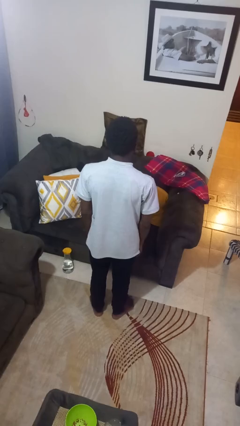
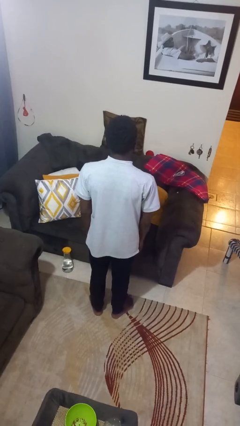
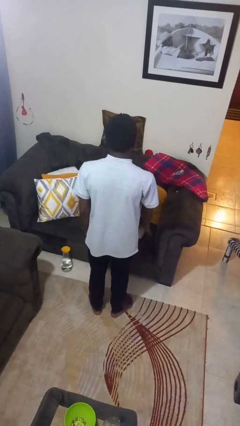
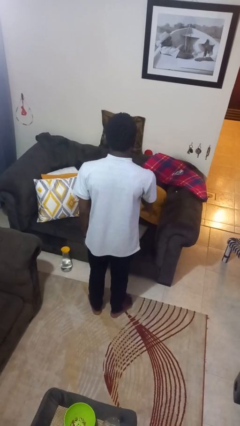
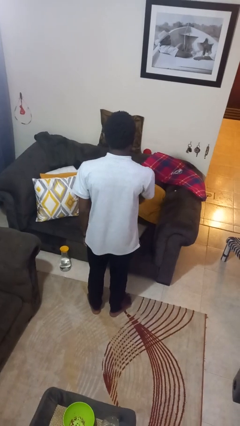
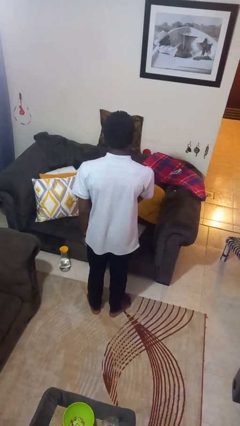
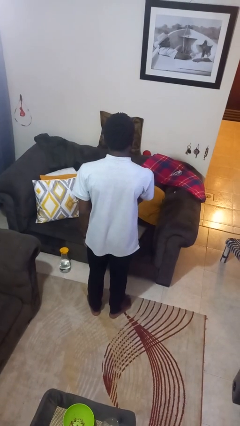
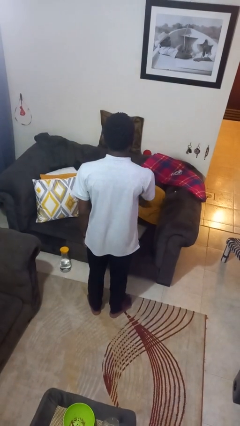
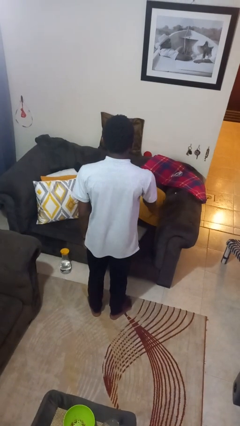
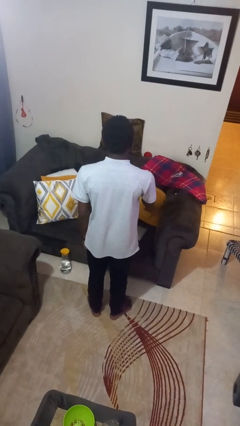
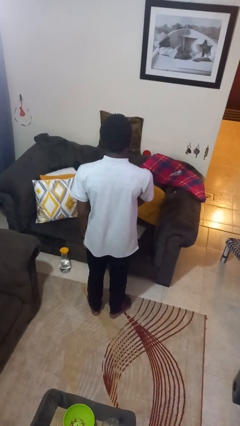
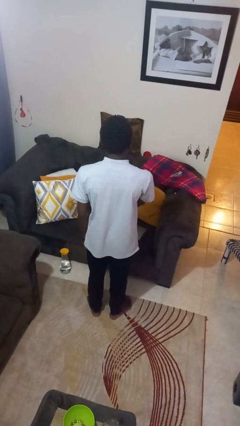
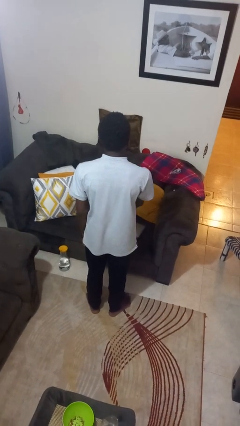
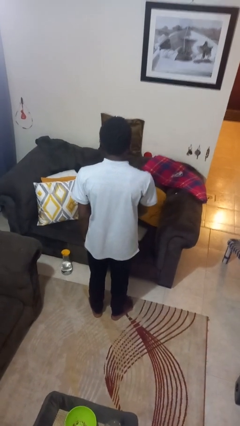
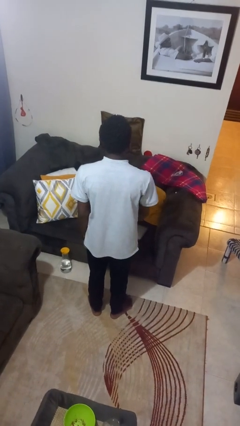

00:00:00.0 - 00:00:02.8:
person waves hand over object

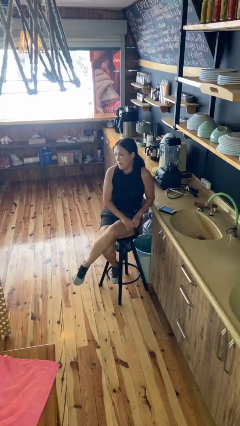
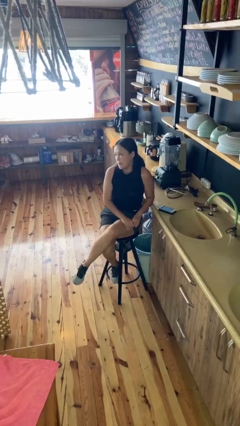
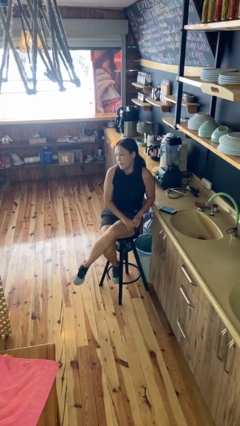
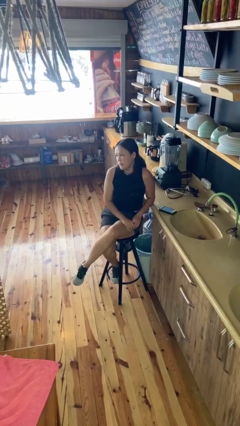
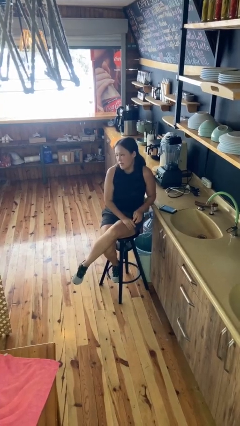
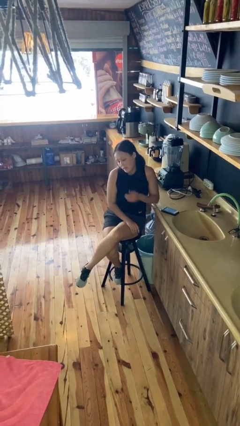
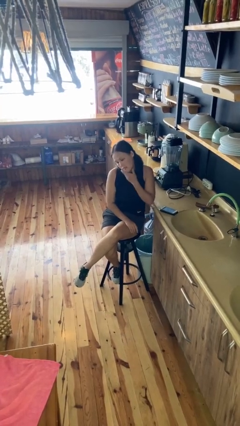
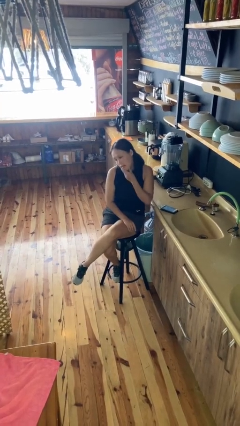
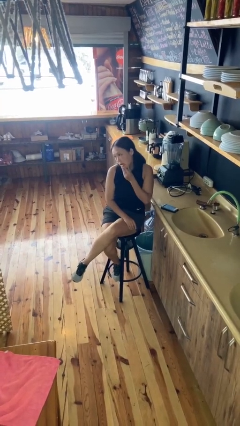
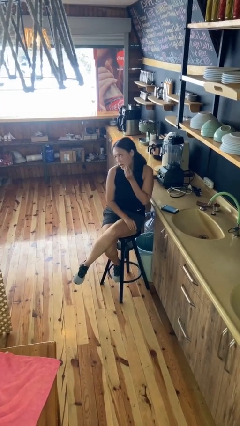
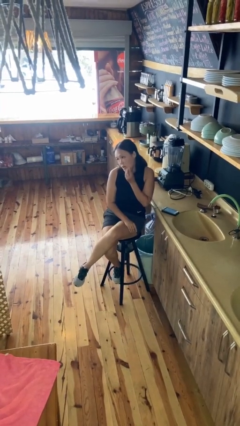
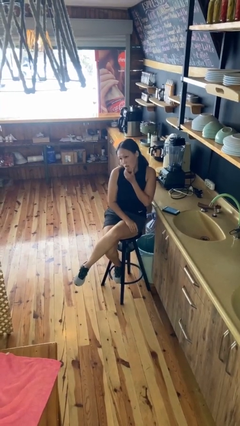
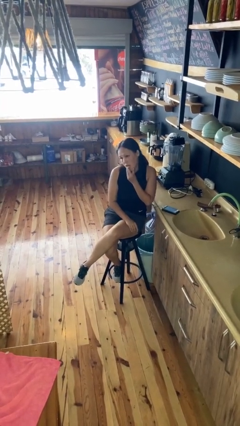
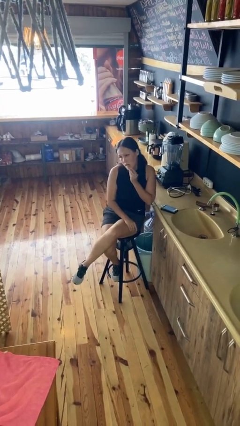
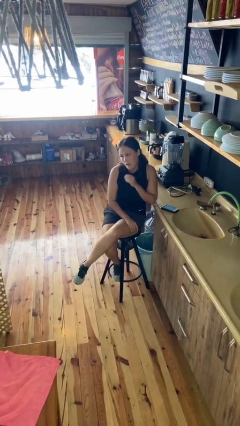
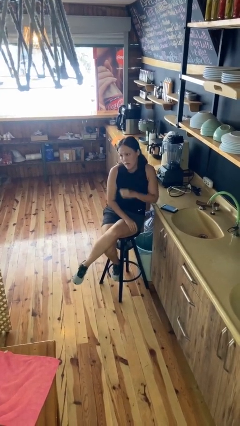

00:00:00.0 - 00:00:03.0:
person strokes chin

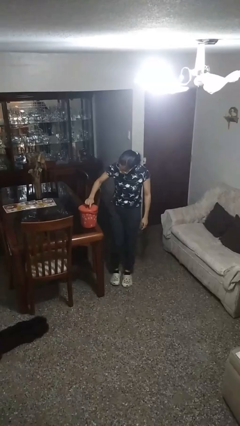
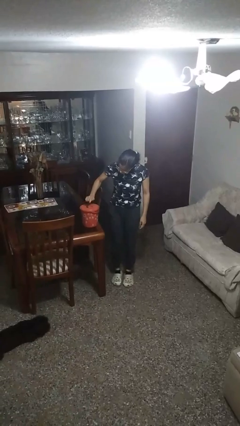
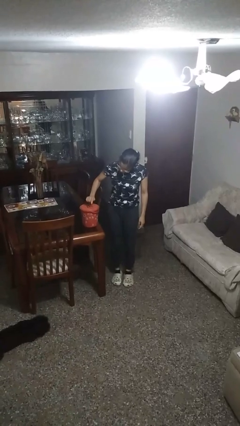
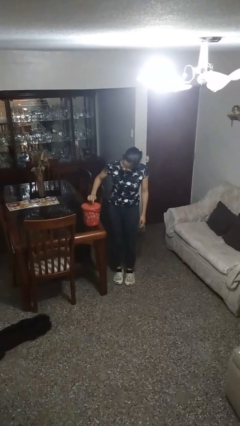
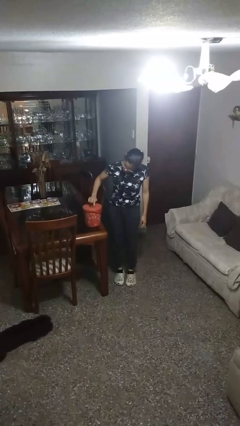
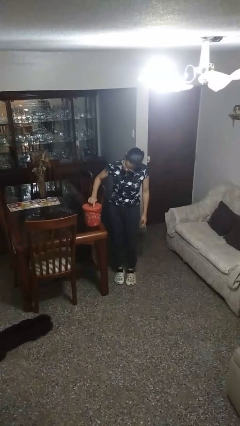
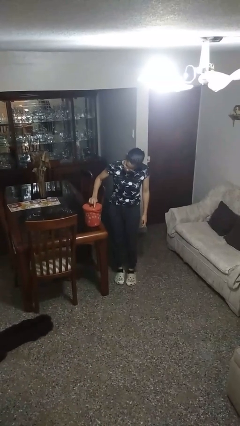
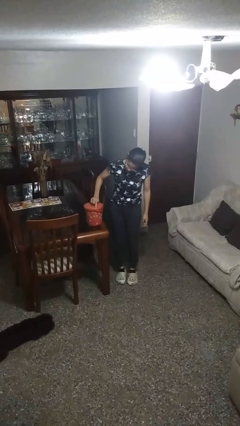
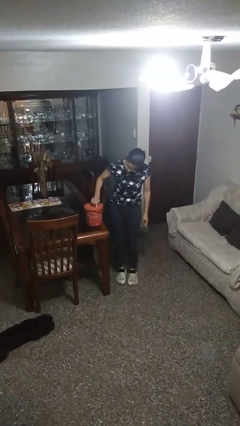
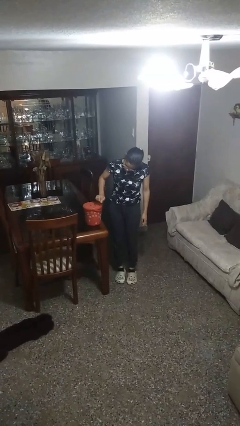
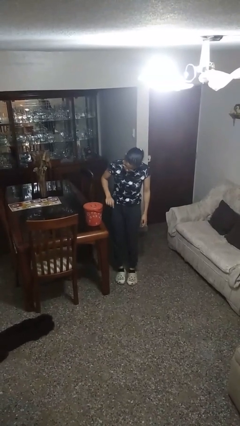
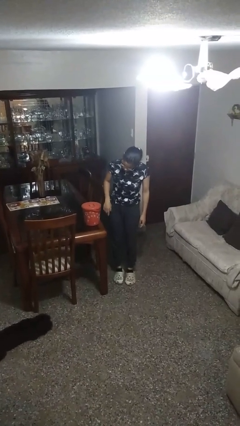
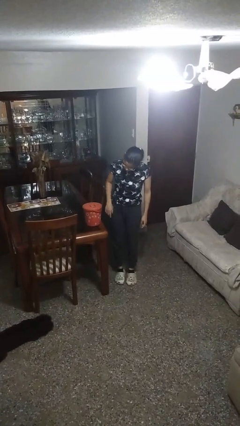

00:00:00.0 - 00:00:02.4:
person taps object with finger

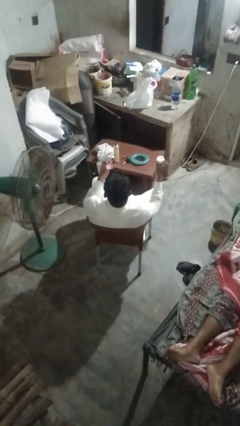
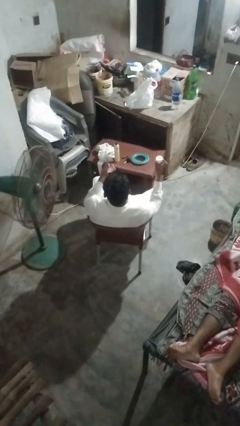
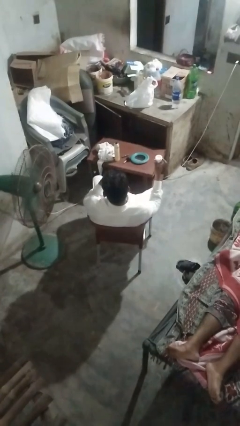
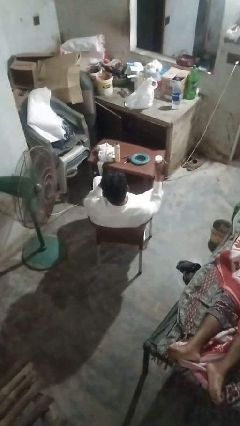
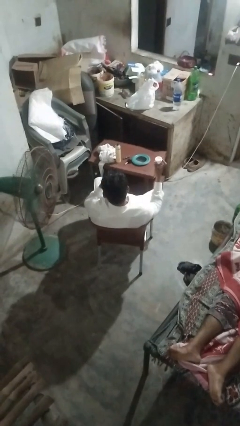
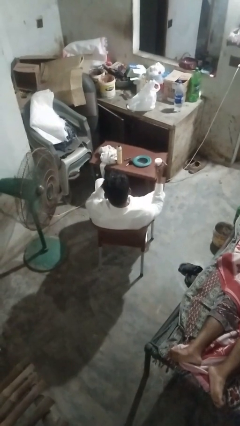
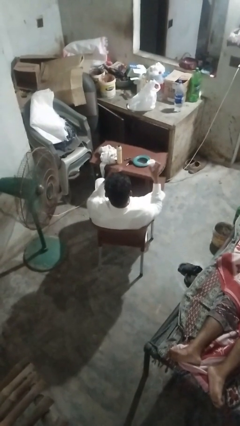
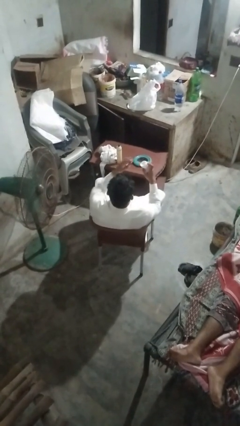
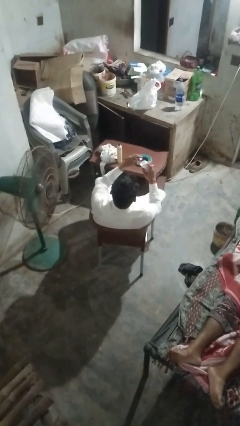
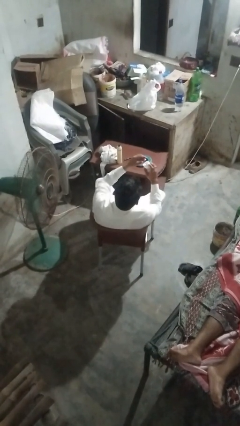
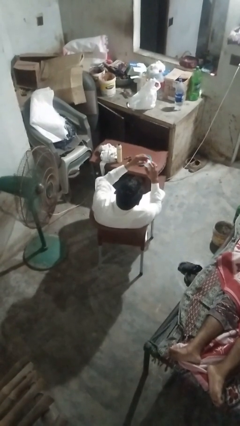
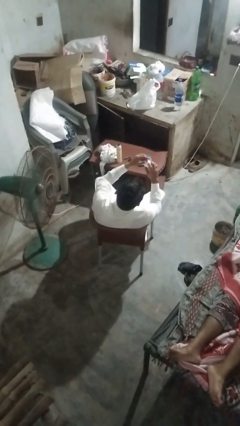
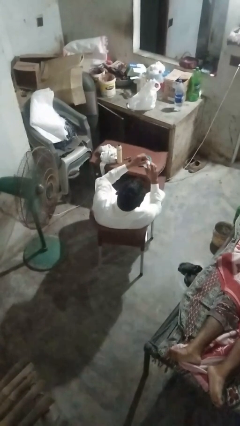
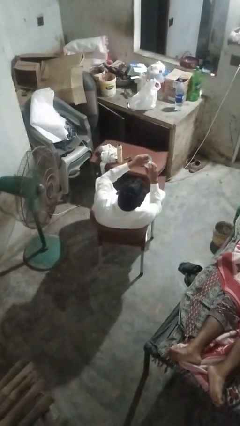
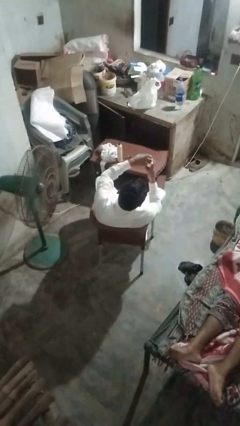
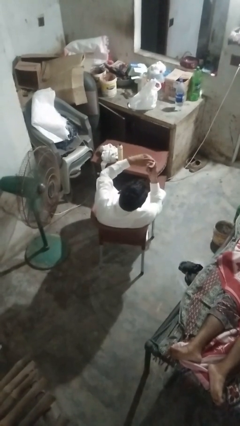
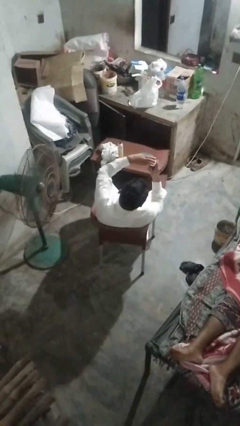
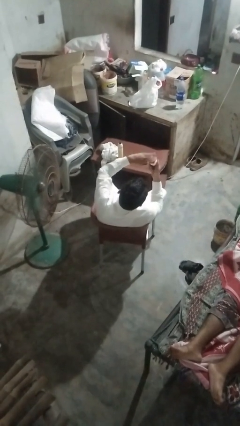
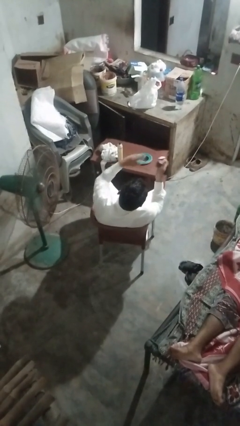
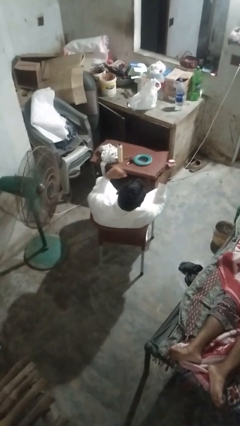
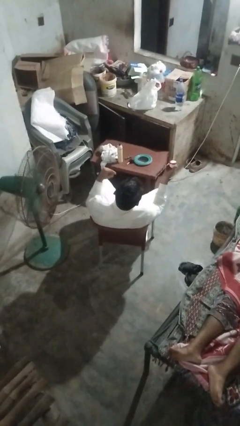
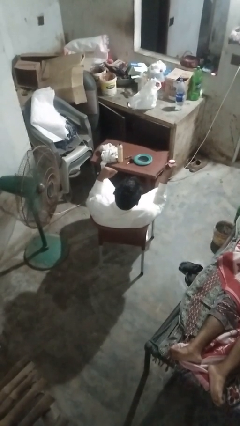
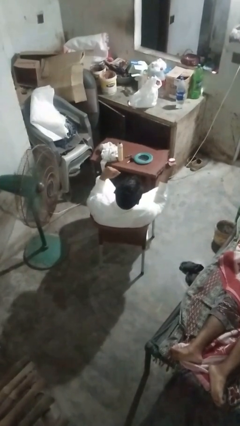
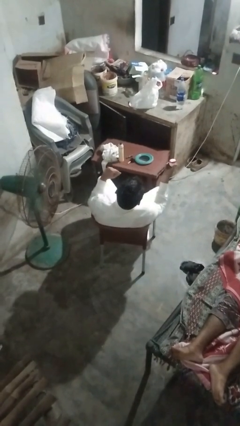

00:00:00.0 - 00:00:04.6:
person closes jar

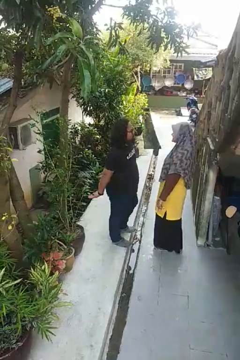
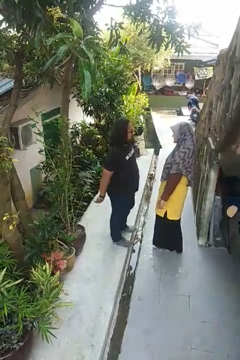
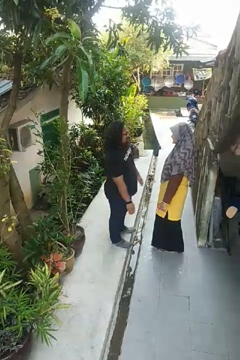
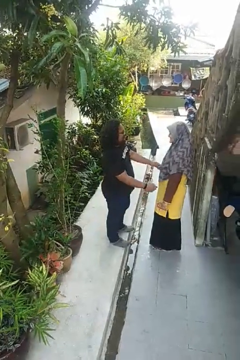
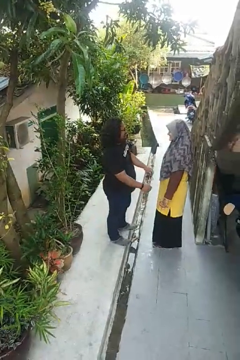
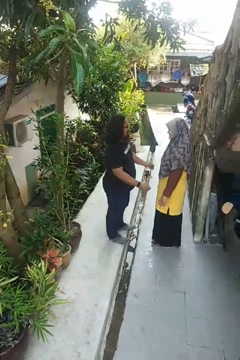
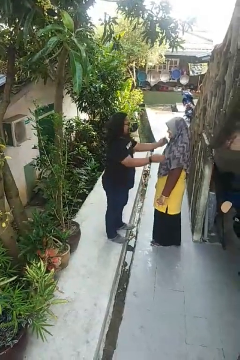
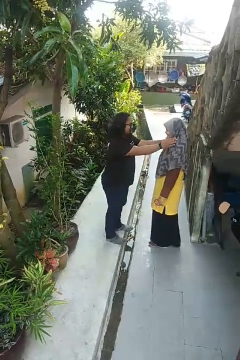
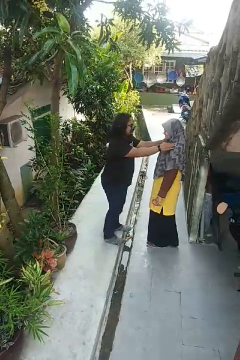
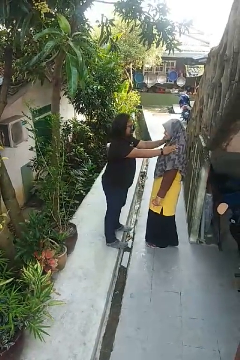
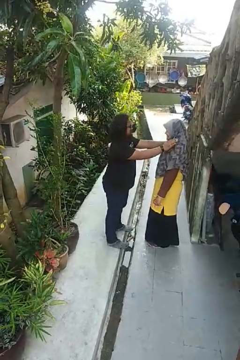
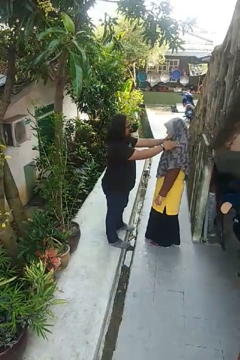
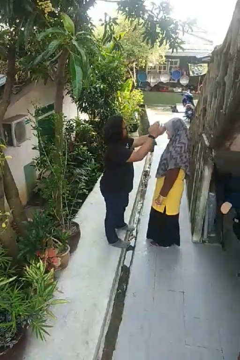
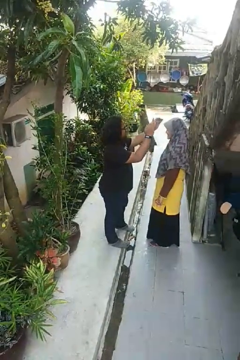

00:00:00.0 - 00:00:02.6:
person pounds shoulders of person

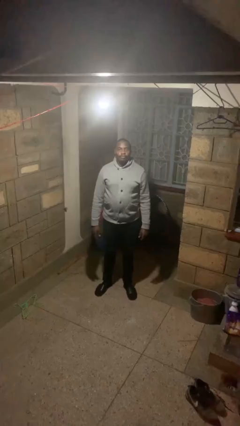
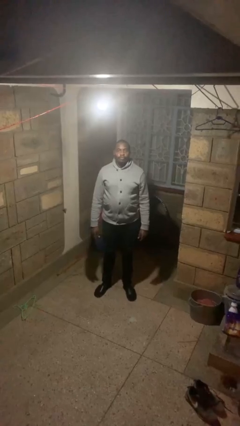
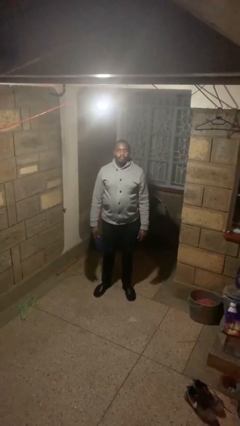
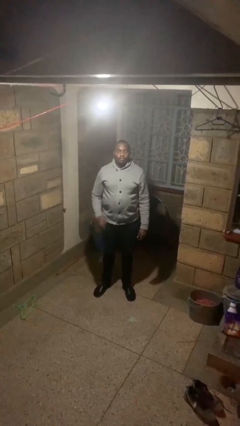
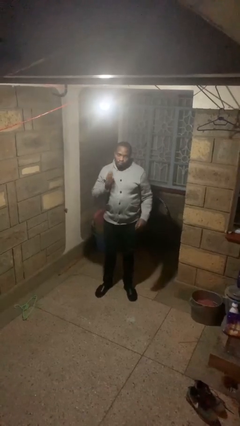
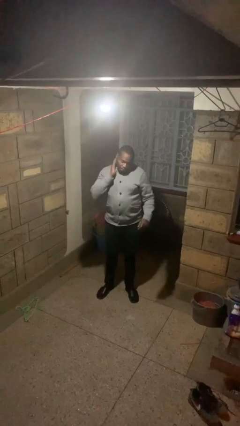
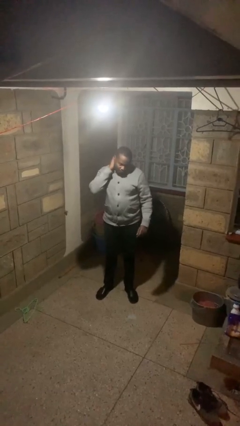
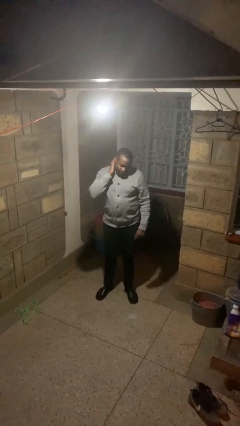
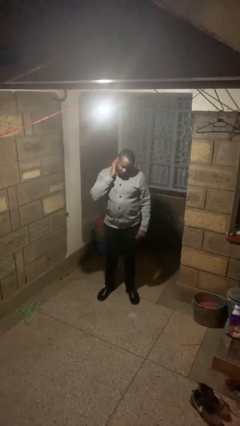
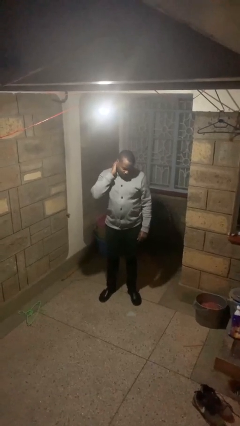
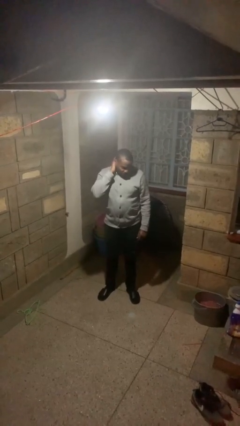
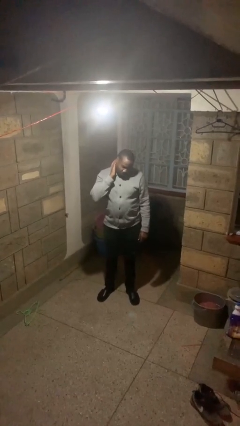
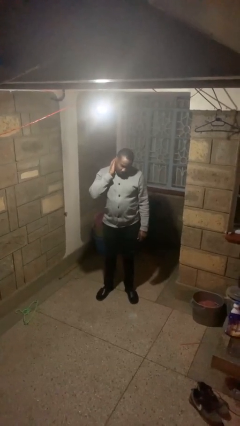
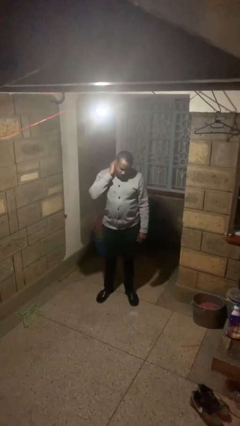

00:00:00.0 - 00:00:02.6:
person rubs neck
